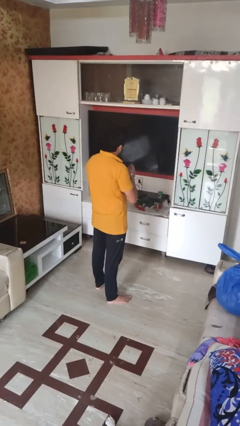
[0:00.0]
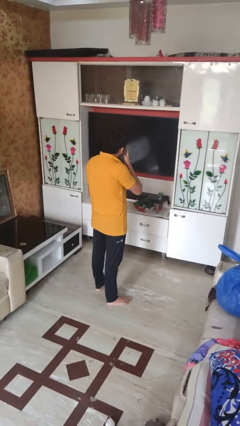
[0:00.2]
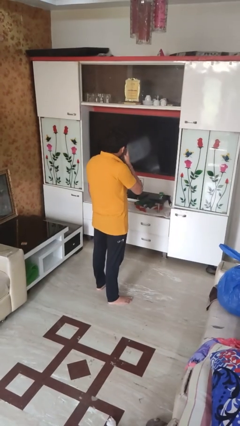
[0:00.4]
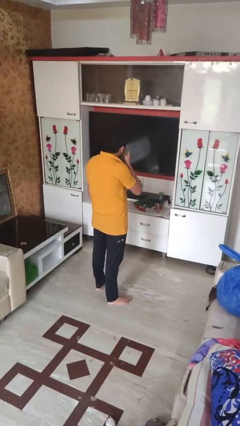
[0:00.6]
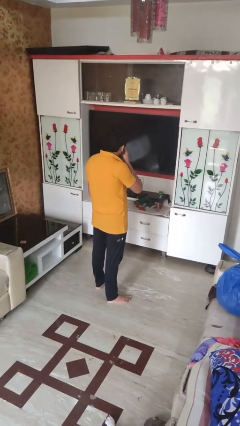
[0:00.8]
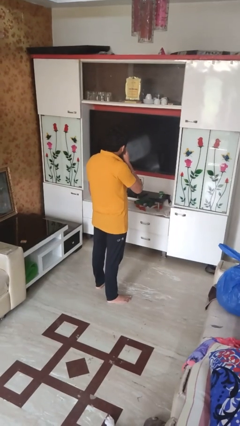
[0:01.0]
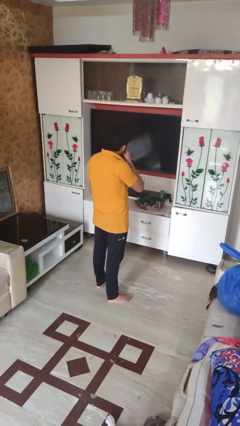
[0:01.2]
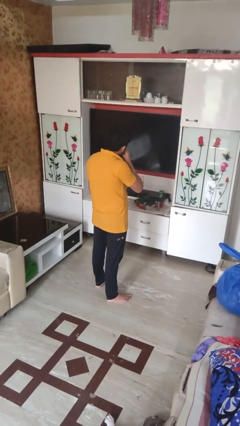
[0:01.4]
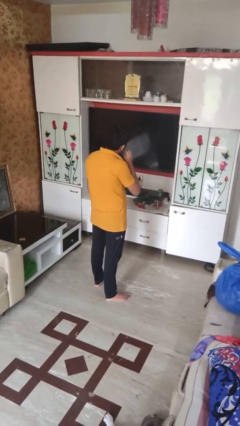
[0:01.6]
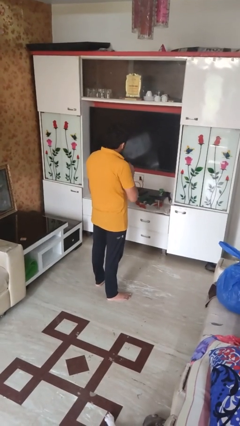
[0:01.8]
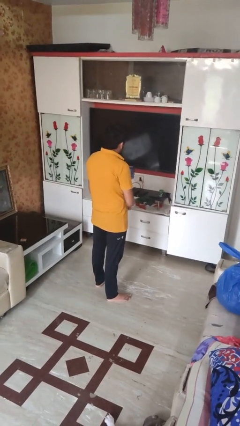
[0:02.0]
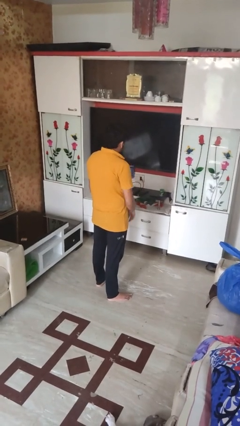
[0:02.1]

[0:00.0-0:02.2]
person licks fingers

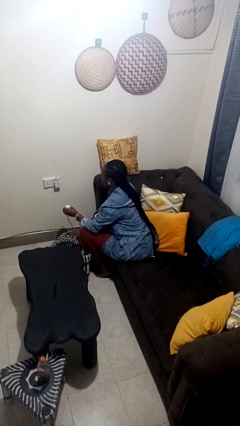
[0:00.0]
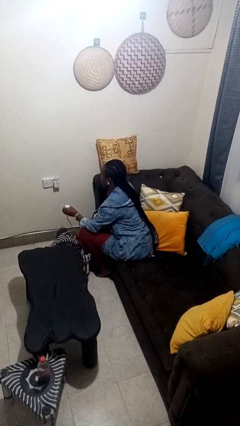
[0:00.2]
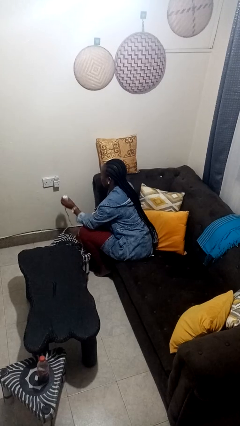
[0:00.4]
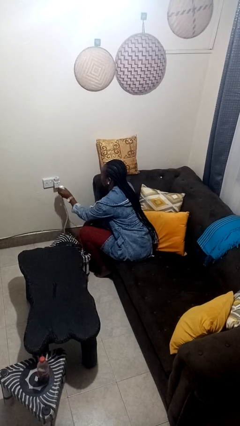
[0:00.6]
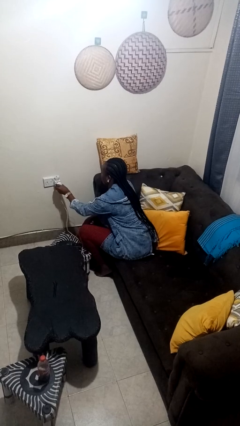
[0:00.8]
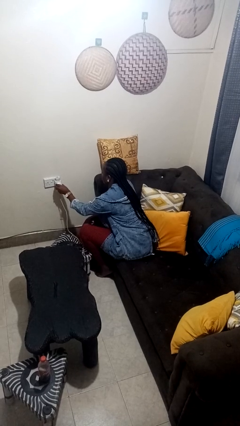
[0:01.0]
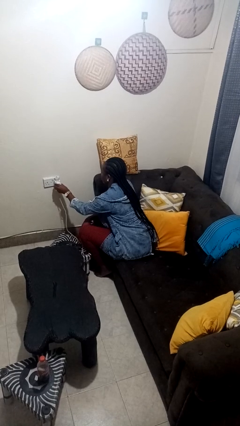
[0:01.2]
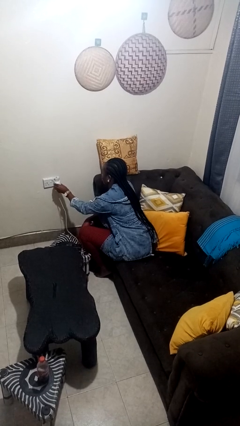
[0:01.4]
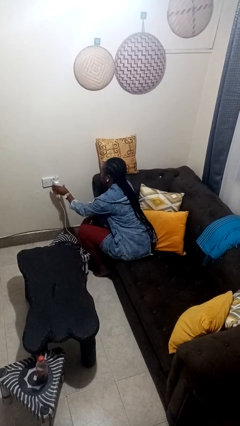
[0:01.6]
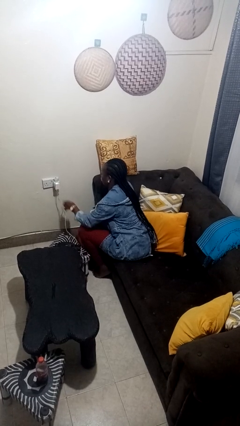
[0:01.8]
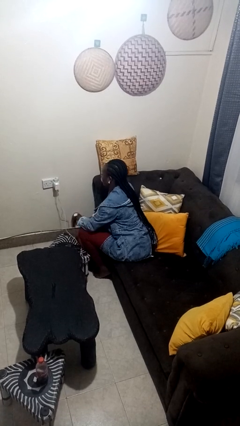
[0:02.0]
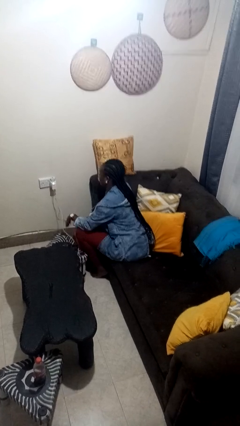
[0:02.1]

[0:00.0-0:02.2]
person plugs into electrical socket

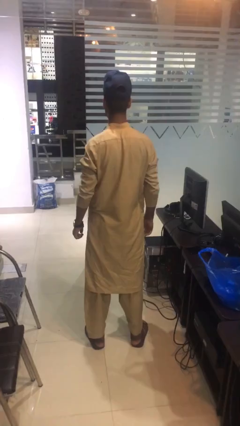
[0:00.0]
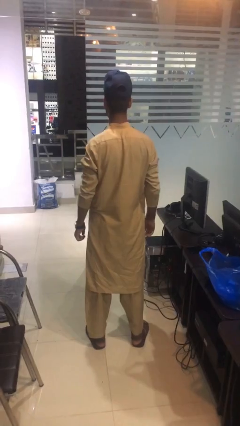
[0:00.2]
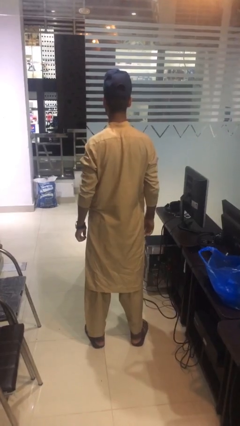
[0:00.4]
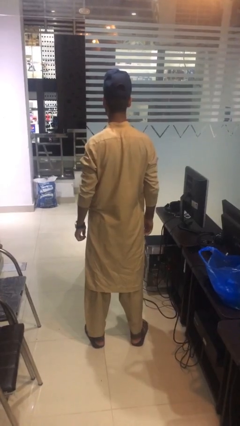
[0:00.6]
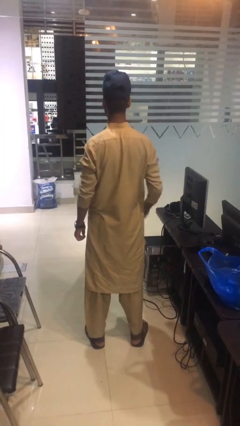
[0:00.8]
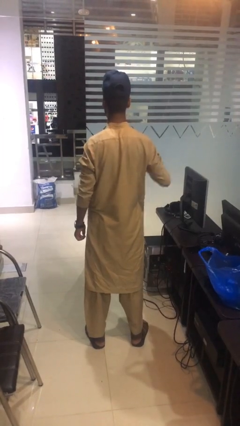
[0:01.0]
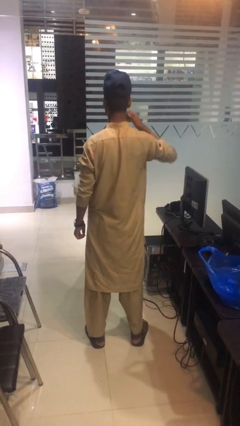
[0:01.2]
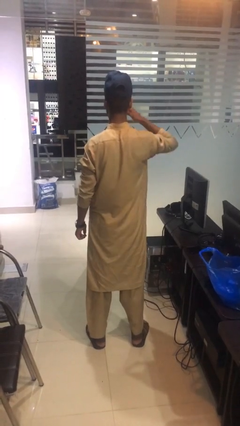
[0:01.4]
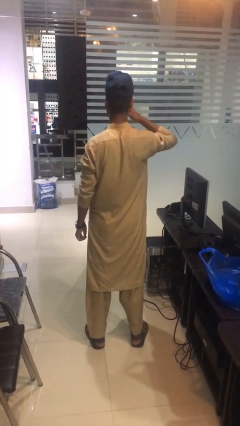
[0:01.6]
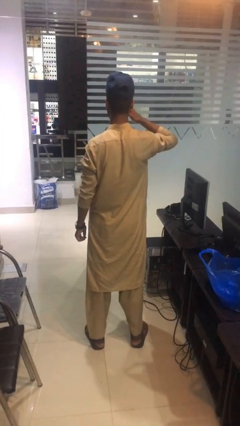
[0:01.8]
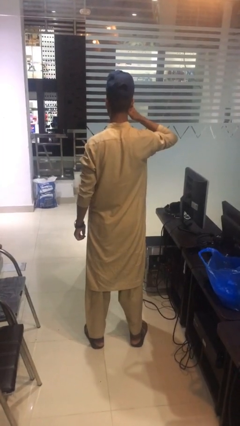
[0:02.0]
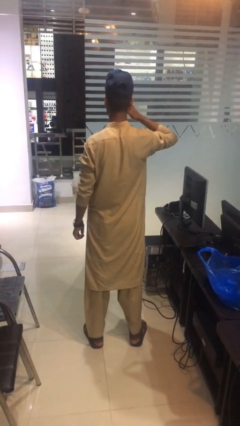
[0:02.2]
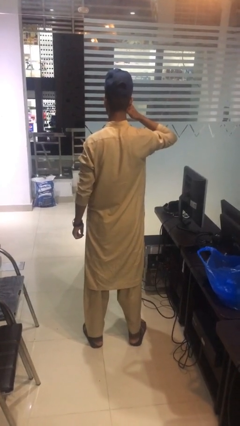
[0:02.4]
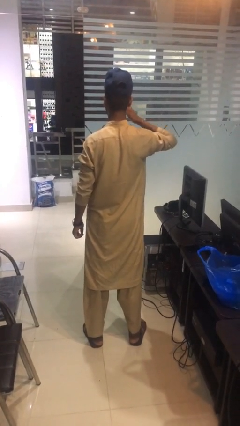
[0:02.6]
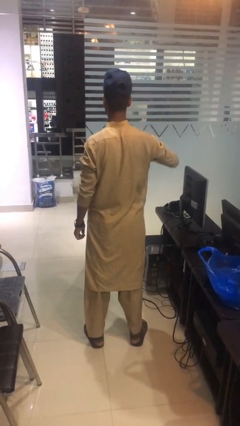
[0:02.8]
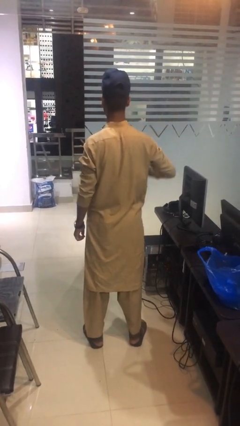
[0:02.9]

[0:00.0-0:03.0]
person scratches face

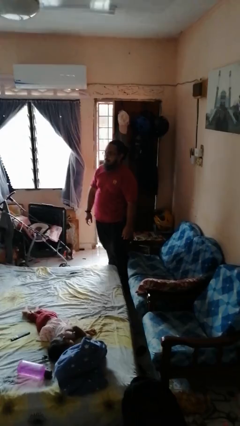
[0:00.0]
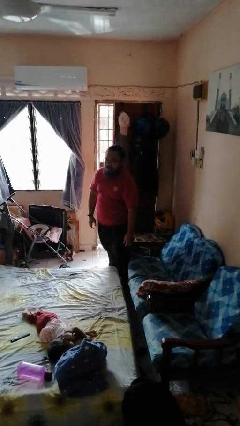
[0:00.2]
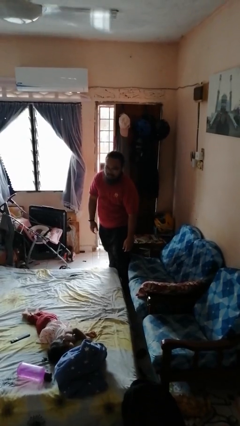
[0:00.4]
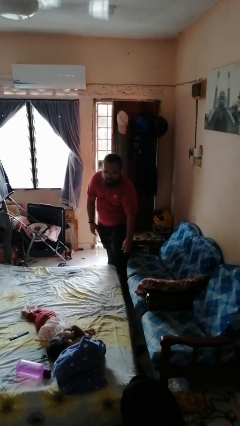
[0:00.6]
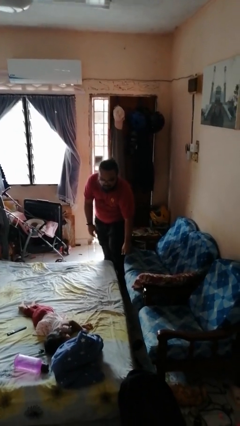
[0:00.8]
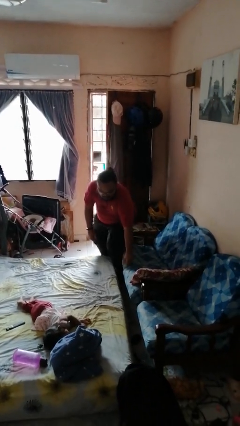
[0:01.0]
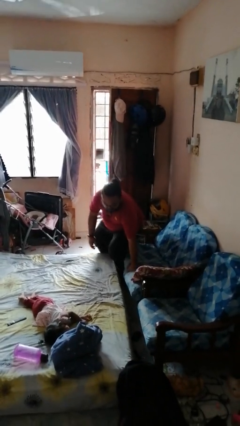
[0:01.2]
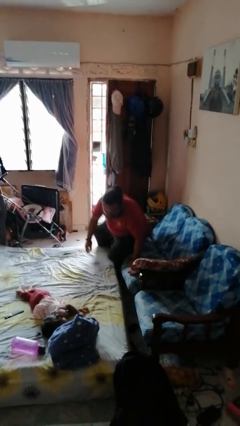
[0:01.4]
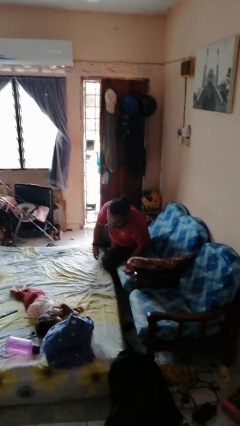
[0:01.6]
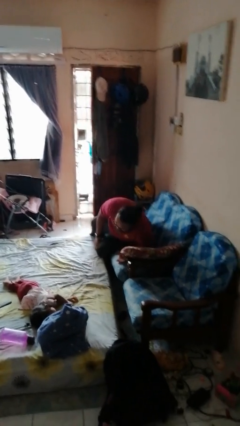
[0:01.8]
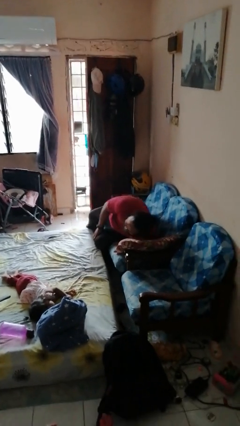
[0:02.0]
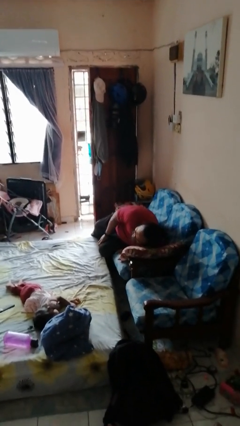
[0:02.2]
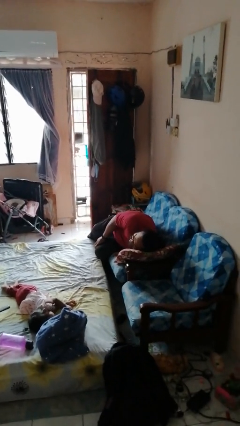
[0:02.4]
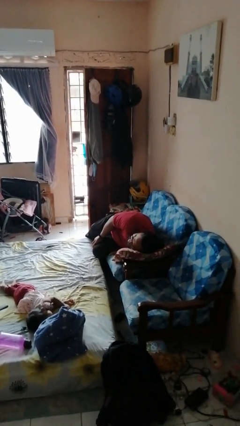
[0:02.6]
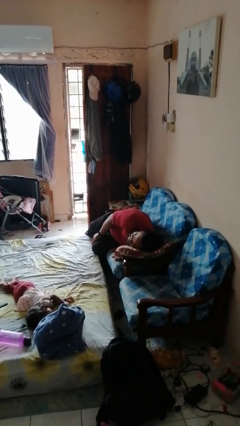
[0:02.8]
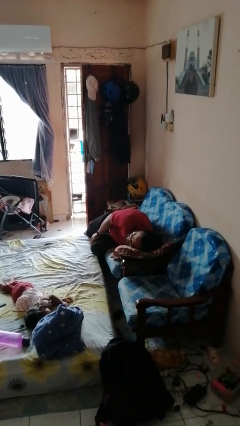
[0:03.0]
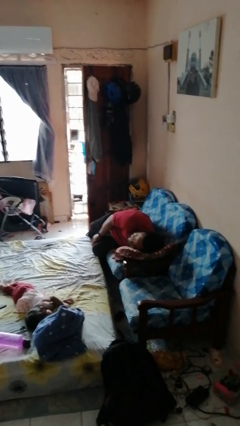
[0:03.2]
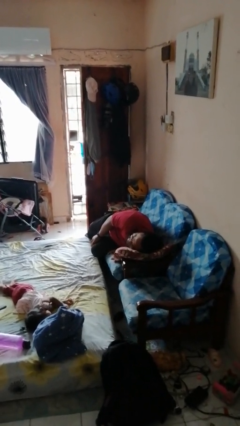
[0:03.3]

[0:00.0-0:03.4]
person lies down on bed

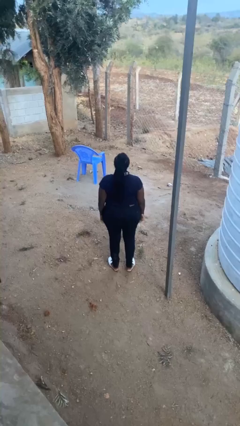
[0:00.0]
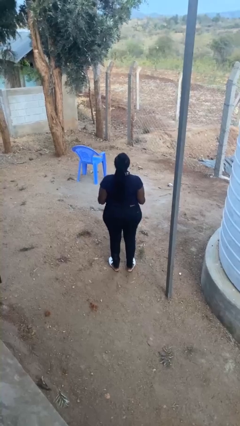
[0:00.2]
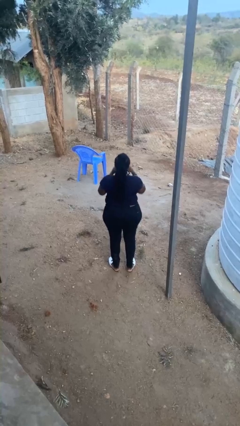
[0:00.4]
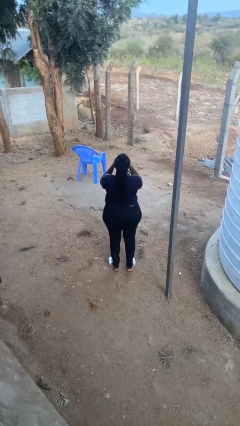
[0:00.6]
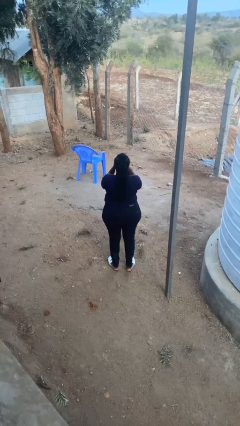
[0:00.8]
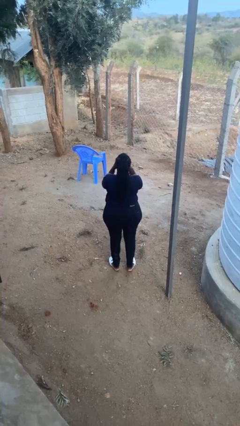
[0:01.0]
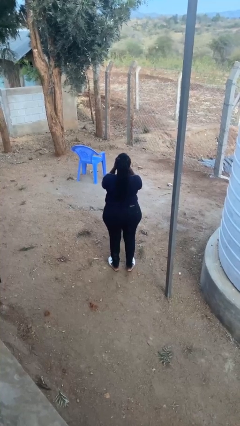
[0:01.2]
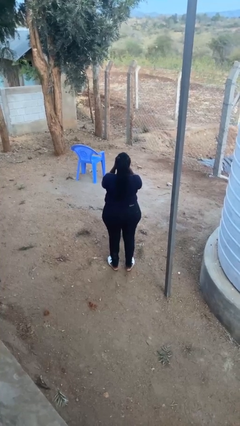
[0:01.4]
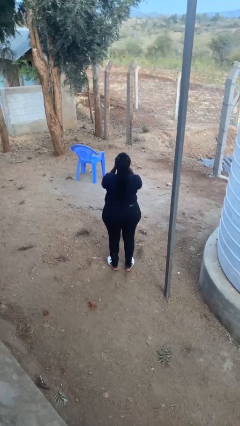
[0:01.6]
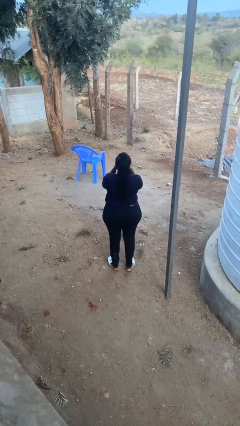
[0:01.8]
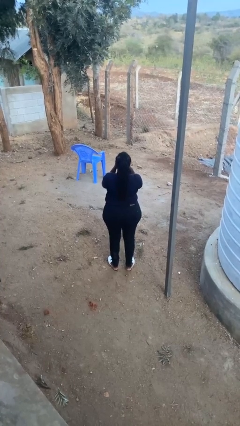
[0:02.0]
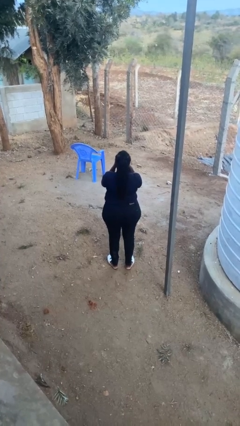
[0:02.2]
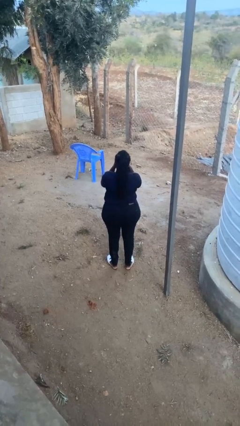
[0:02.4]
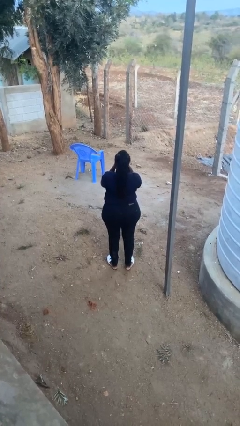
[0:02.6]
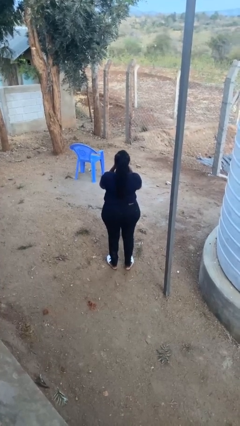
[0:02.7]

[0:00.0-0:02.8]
person rubs eyes

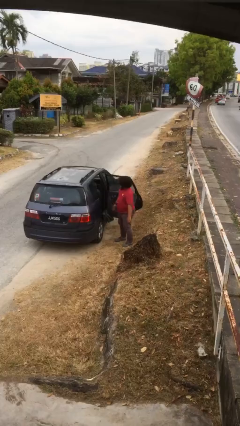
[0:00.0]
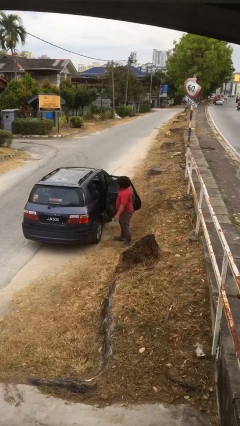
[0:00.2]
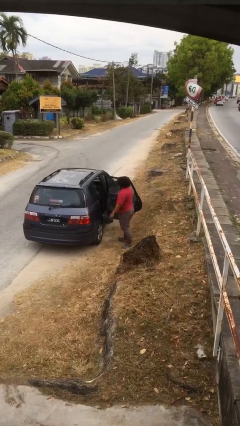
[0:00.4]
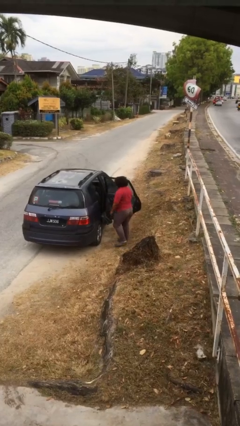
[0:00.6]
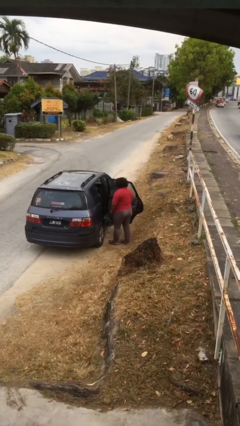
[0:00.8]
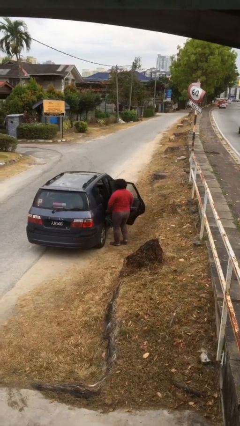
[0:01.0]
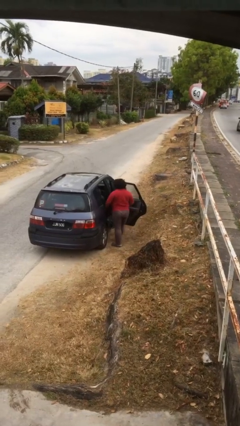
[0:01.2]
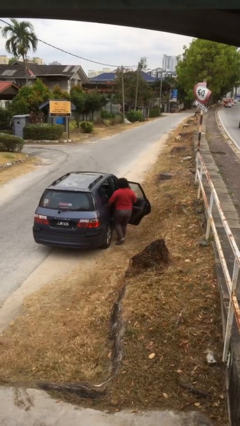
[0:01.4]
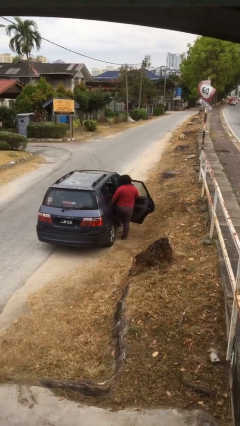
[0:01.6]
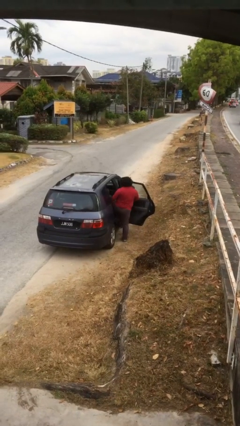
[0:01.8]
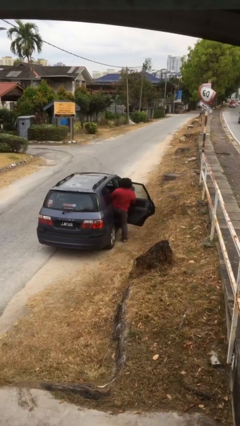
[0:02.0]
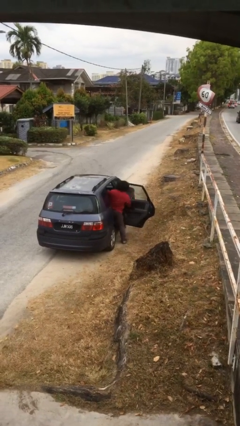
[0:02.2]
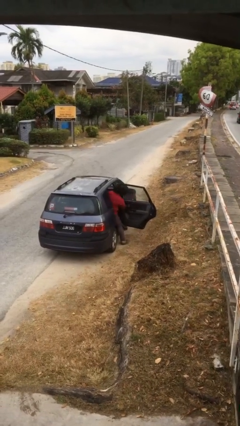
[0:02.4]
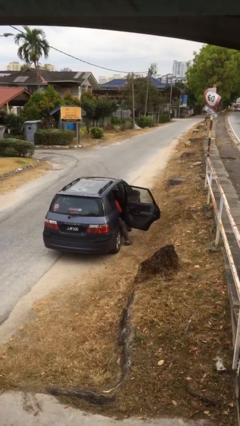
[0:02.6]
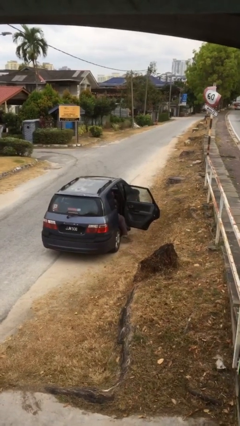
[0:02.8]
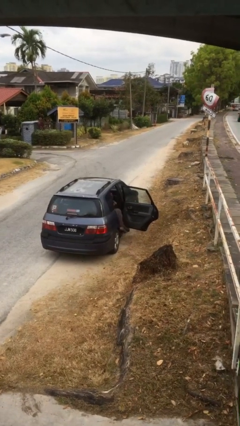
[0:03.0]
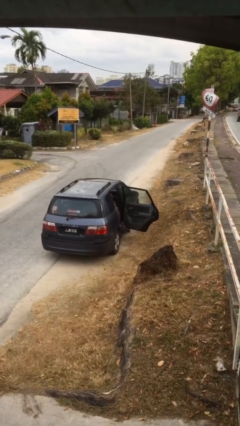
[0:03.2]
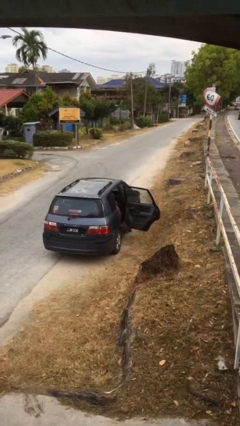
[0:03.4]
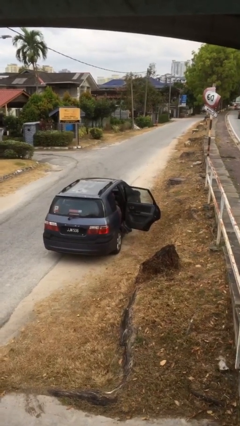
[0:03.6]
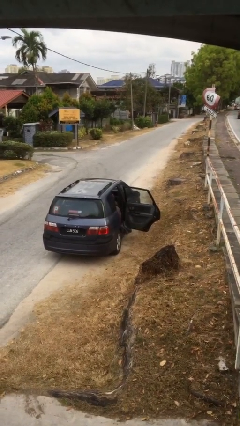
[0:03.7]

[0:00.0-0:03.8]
person enters car
